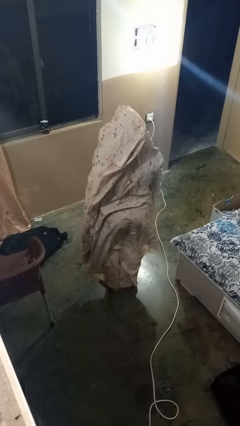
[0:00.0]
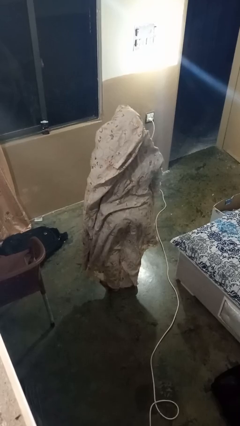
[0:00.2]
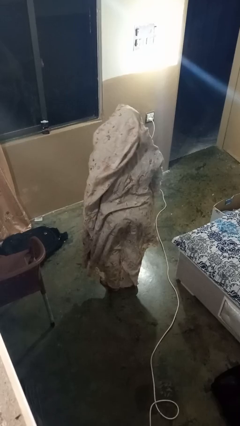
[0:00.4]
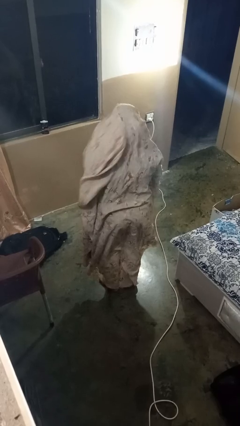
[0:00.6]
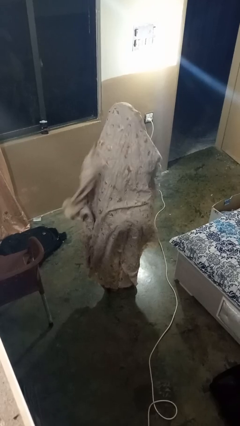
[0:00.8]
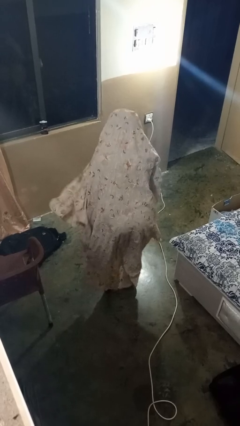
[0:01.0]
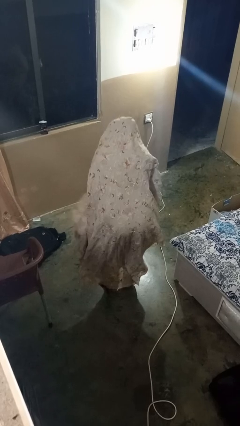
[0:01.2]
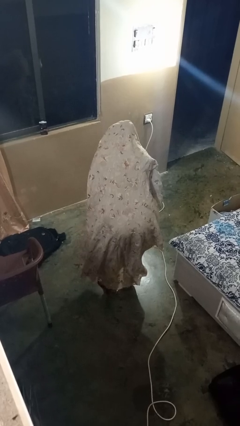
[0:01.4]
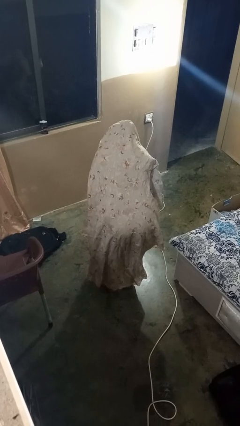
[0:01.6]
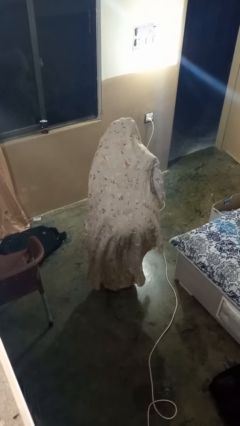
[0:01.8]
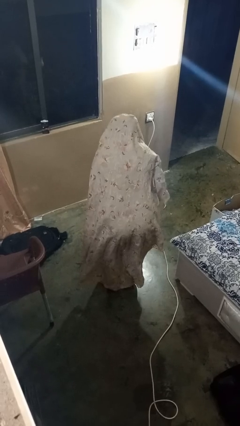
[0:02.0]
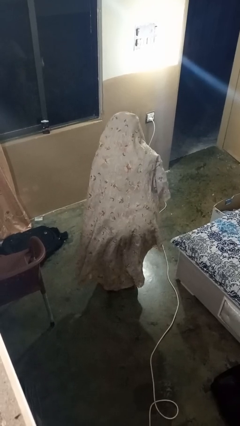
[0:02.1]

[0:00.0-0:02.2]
person bows

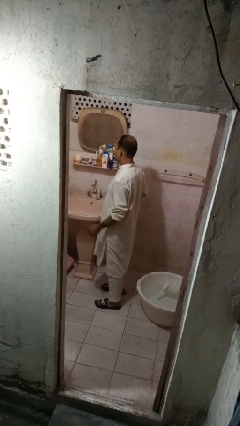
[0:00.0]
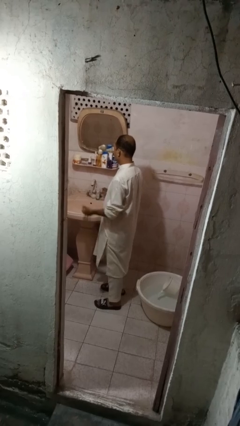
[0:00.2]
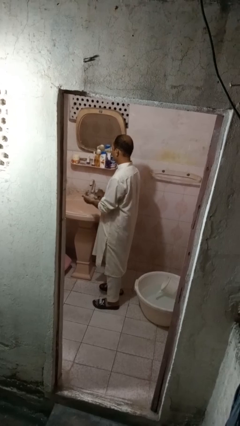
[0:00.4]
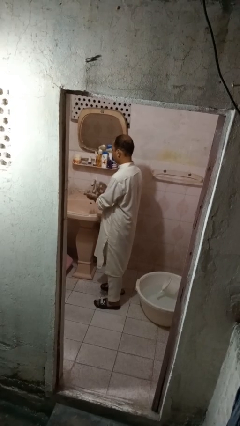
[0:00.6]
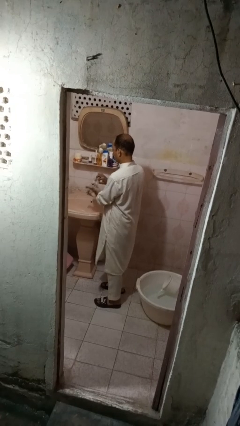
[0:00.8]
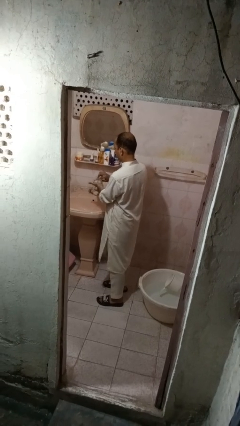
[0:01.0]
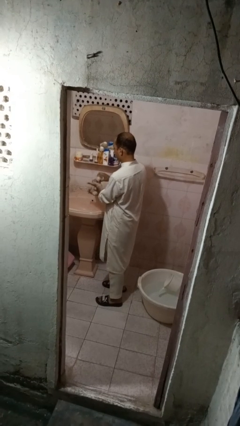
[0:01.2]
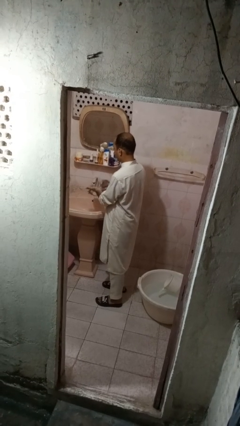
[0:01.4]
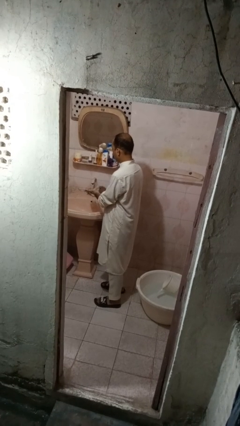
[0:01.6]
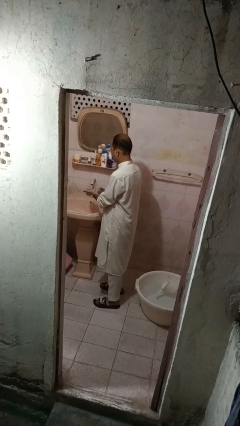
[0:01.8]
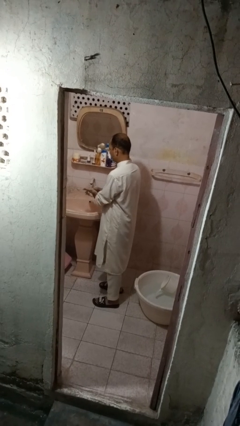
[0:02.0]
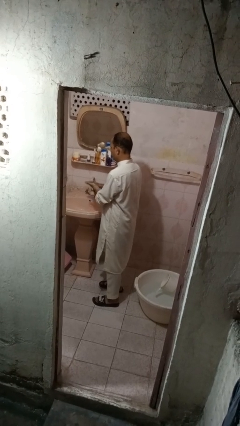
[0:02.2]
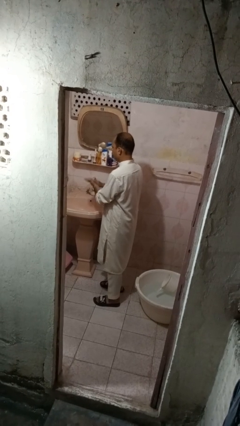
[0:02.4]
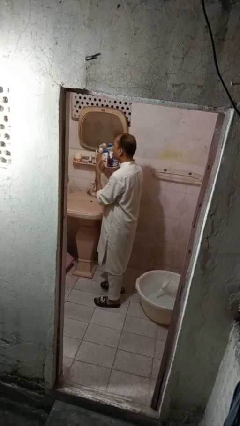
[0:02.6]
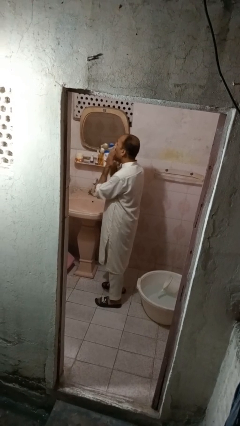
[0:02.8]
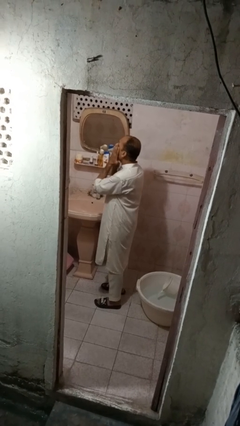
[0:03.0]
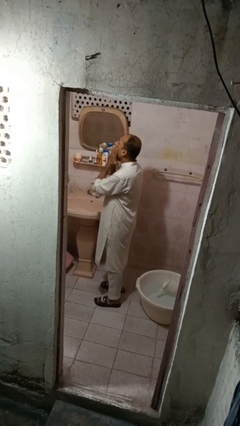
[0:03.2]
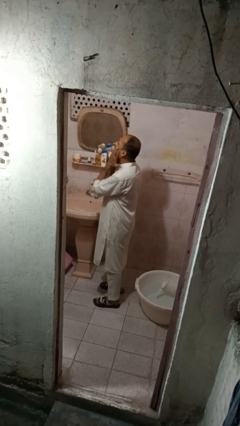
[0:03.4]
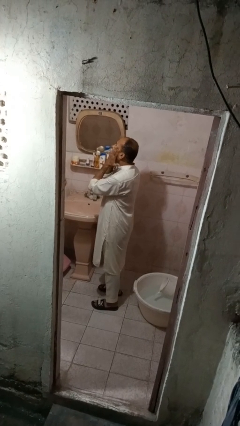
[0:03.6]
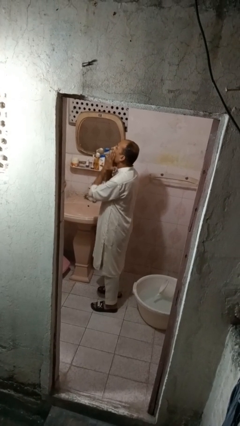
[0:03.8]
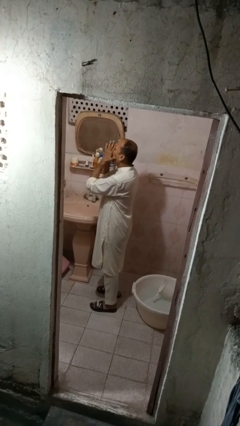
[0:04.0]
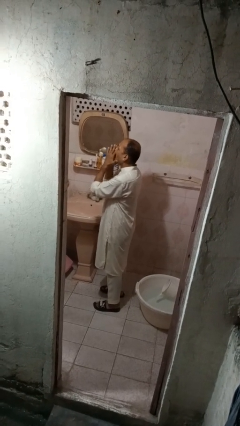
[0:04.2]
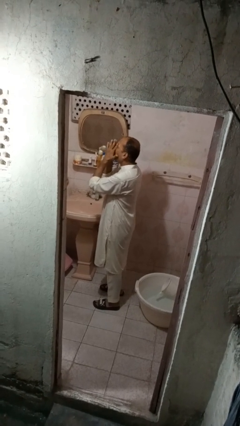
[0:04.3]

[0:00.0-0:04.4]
person applies facial moisturizer

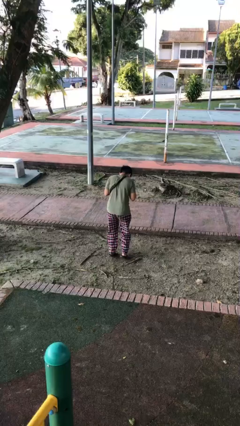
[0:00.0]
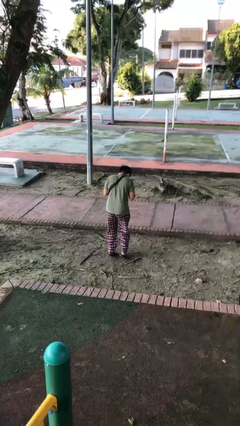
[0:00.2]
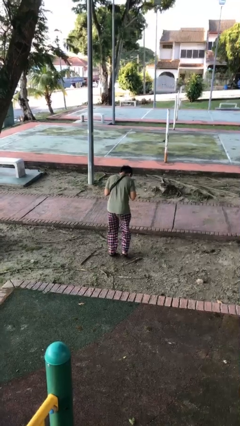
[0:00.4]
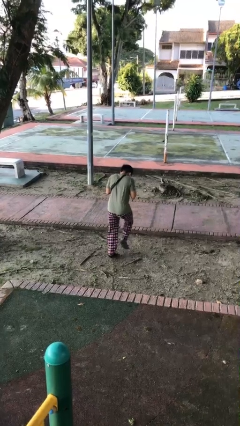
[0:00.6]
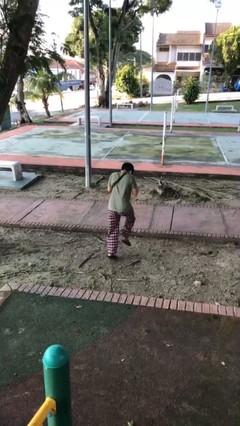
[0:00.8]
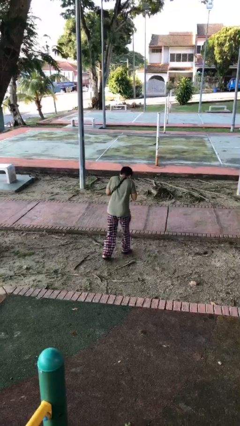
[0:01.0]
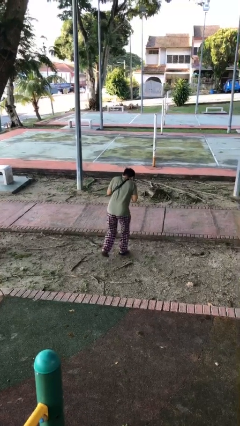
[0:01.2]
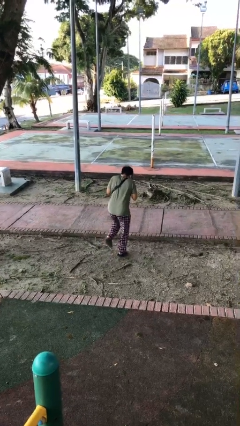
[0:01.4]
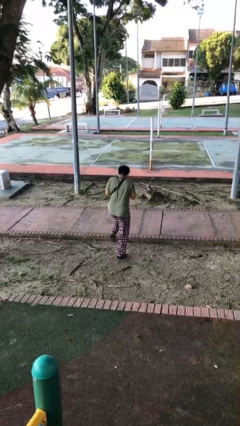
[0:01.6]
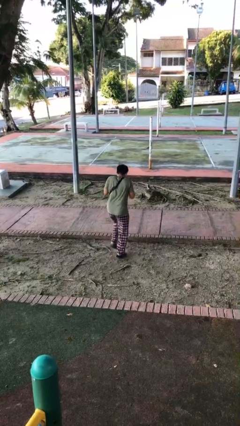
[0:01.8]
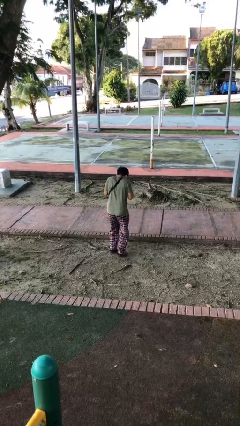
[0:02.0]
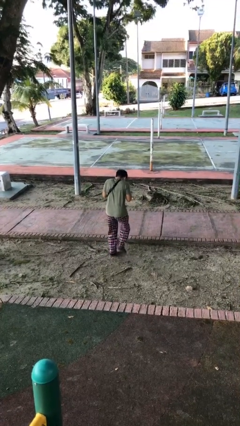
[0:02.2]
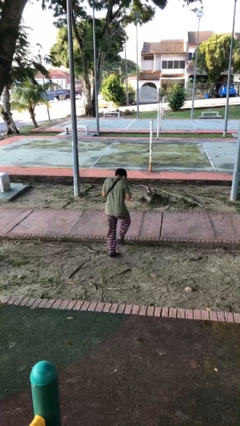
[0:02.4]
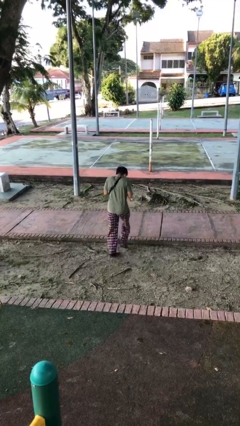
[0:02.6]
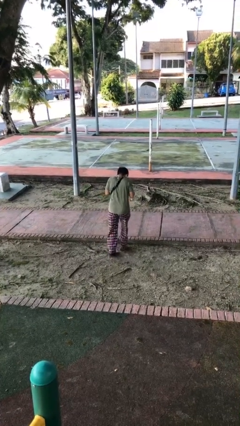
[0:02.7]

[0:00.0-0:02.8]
person walks tiptoe

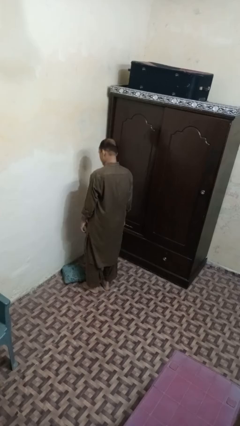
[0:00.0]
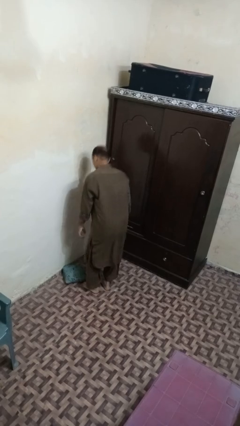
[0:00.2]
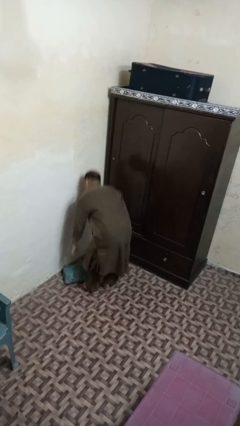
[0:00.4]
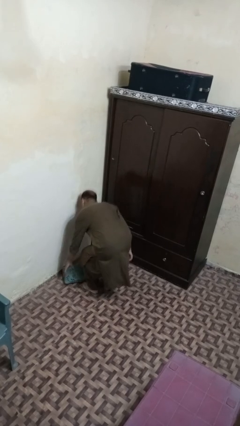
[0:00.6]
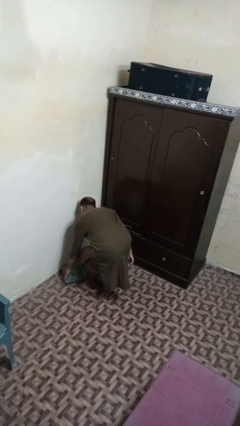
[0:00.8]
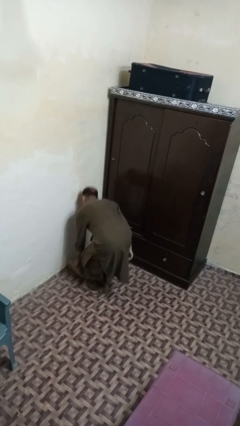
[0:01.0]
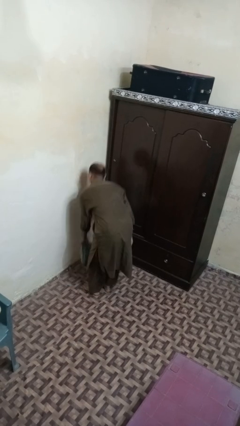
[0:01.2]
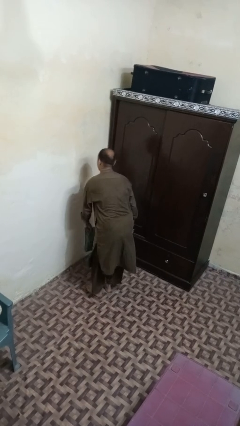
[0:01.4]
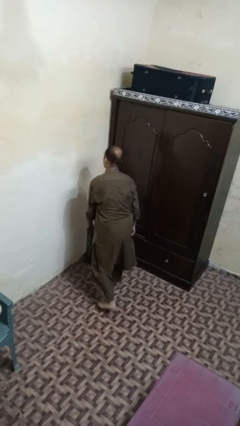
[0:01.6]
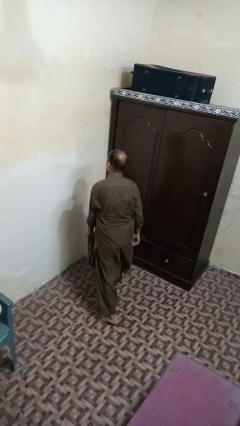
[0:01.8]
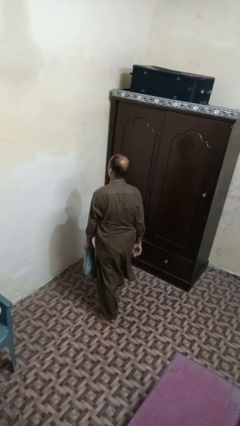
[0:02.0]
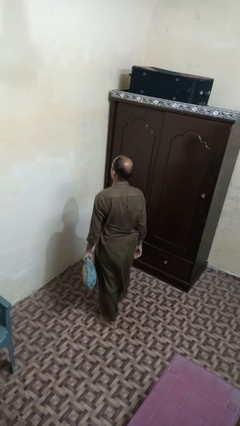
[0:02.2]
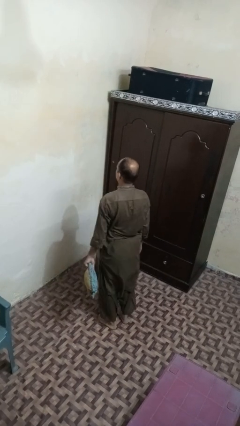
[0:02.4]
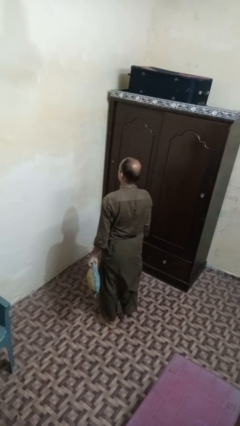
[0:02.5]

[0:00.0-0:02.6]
person picks up object from floor

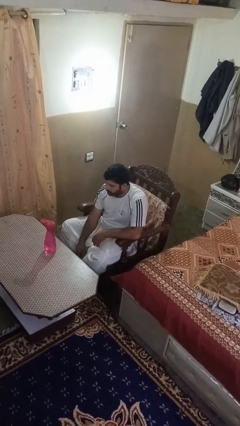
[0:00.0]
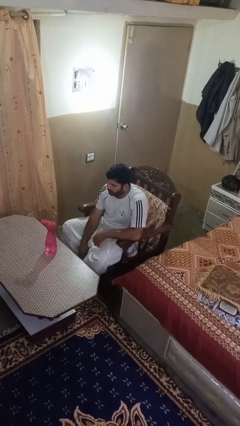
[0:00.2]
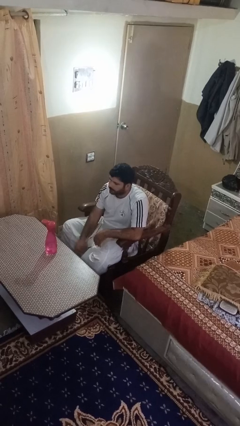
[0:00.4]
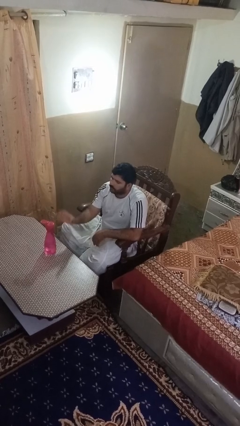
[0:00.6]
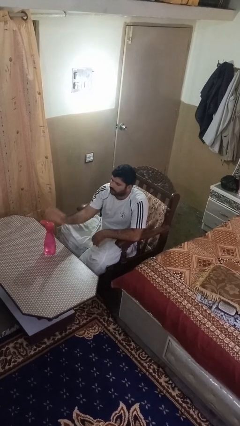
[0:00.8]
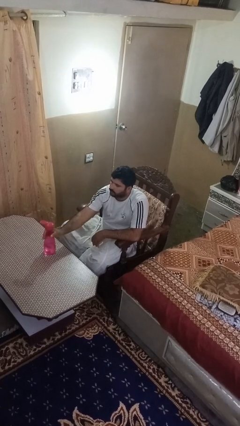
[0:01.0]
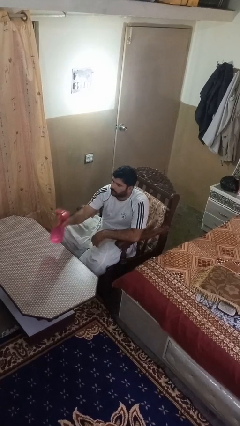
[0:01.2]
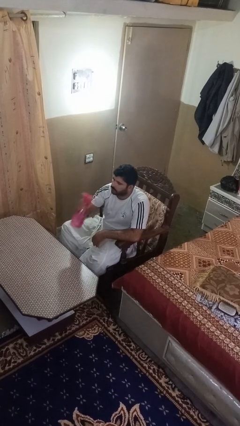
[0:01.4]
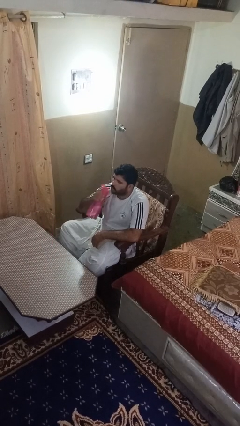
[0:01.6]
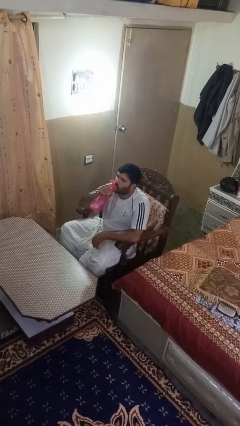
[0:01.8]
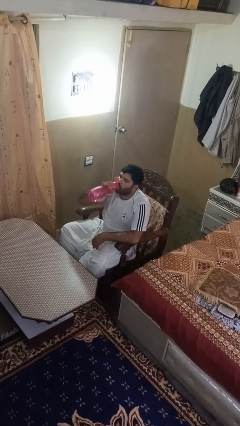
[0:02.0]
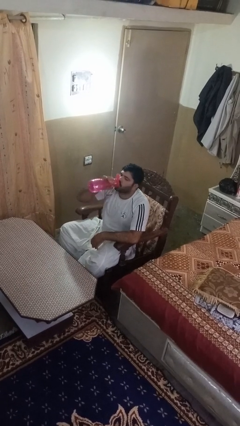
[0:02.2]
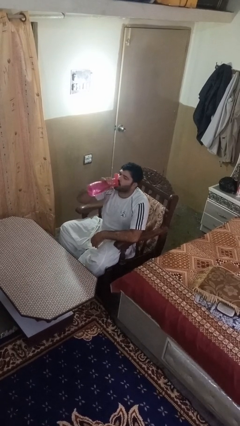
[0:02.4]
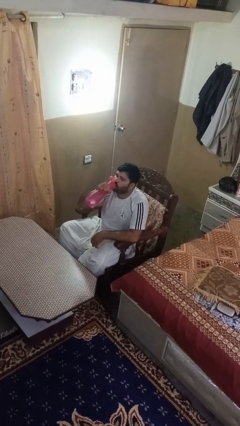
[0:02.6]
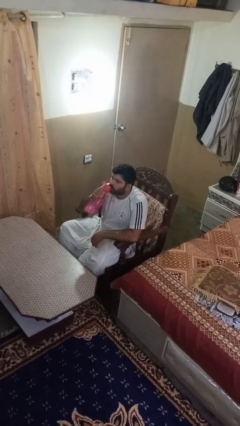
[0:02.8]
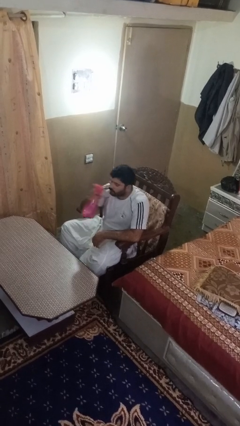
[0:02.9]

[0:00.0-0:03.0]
person drinks from bottle

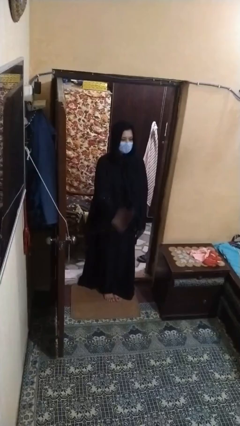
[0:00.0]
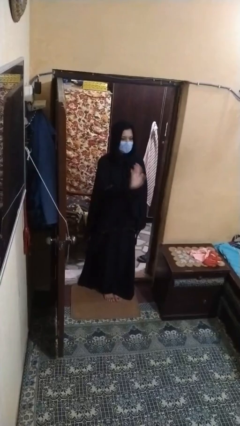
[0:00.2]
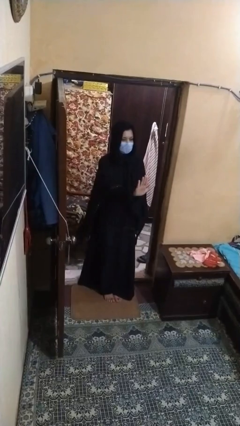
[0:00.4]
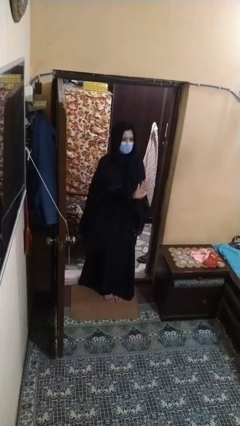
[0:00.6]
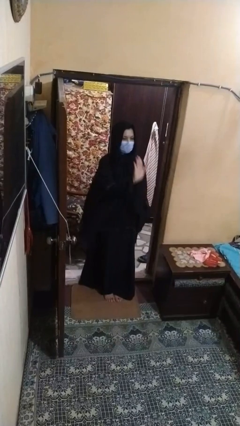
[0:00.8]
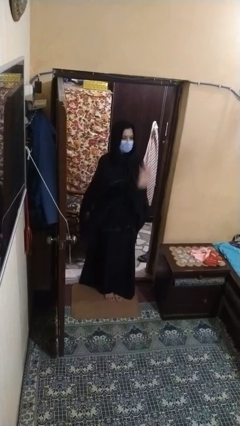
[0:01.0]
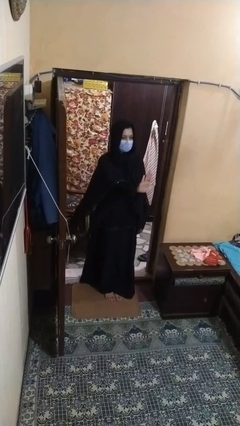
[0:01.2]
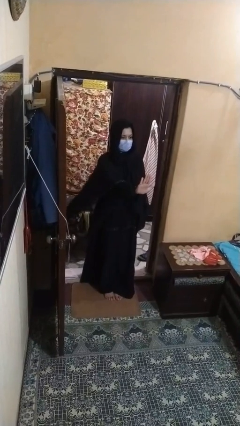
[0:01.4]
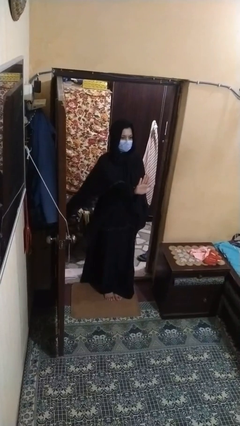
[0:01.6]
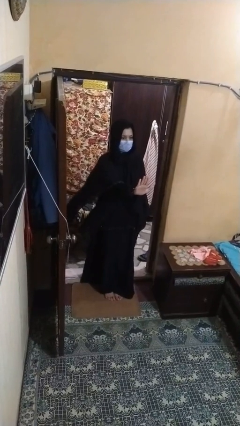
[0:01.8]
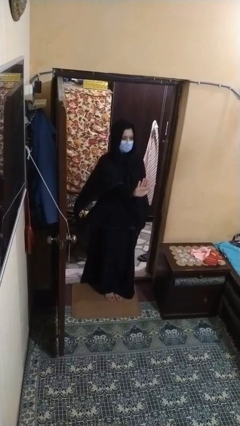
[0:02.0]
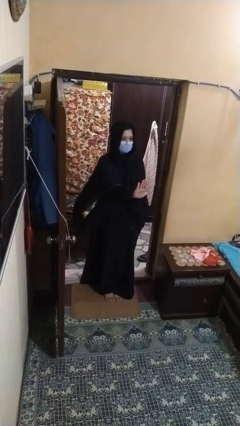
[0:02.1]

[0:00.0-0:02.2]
person gestures stop
